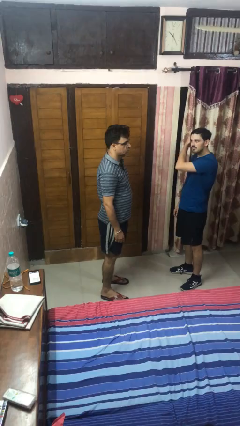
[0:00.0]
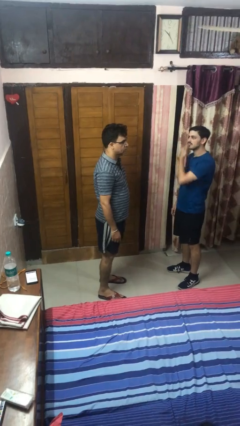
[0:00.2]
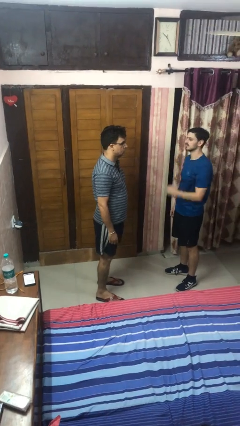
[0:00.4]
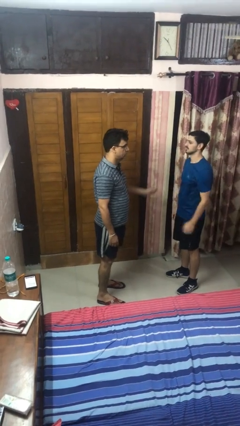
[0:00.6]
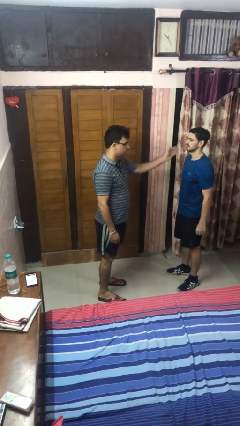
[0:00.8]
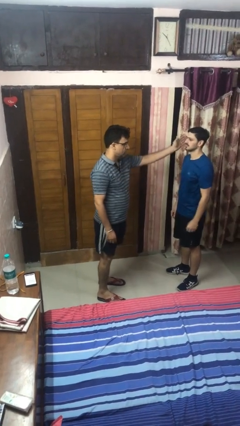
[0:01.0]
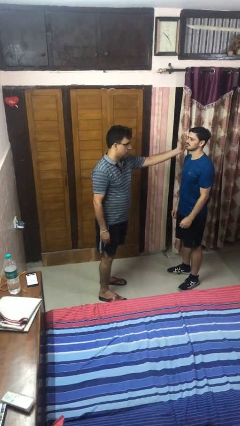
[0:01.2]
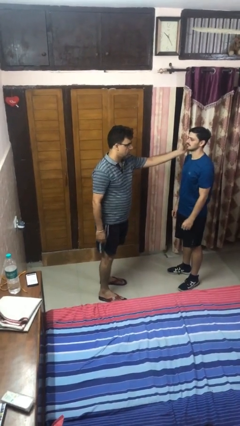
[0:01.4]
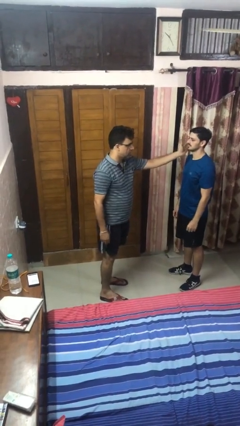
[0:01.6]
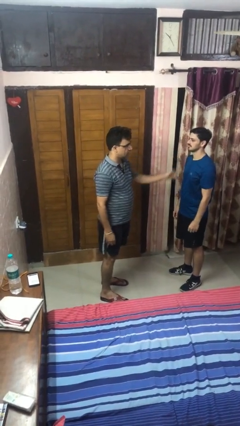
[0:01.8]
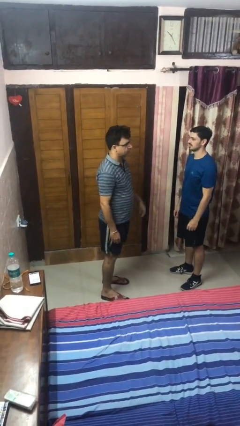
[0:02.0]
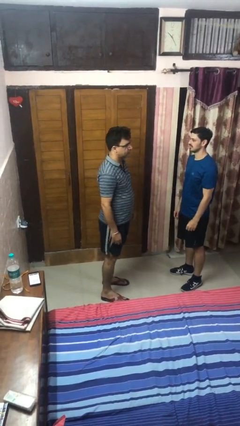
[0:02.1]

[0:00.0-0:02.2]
person touches face of person

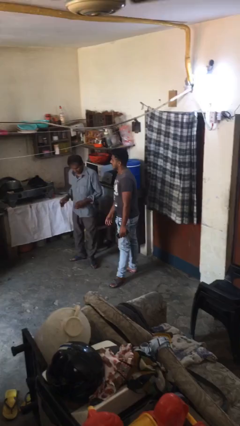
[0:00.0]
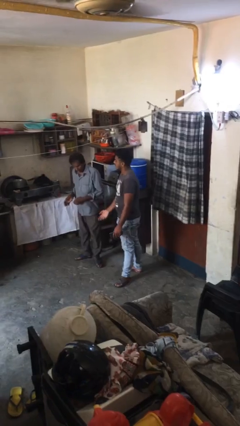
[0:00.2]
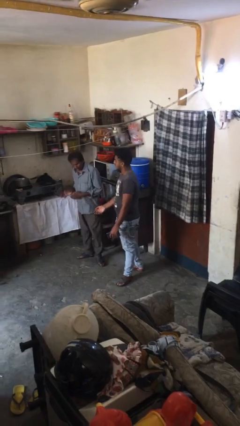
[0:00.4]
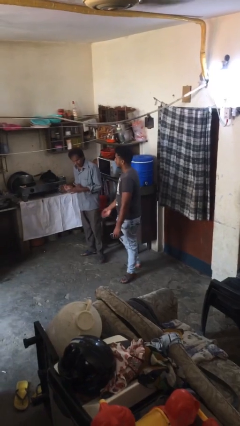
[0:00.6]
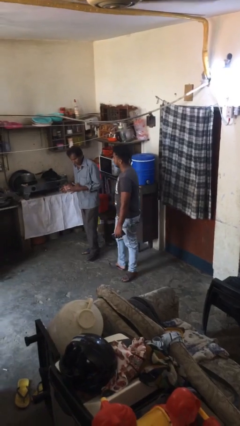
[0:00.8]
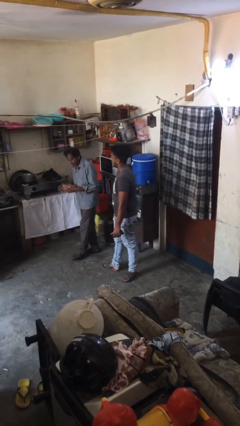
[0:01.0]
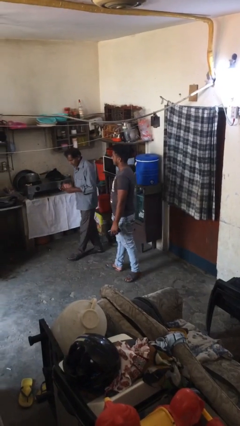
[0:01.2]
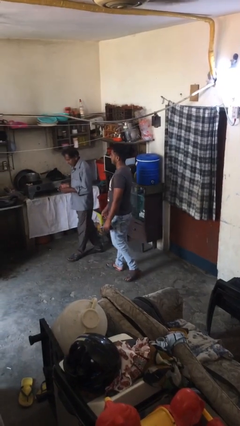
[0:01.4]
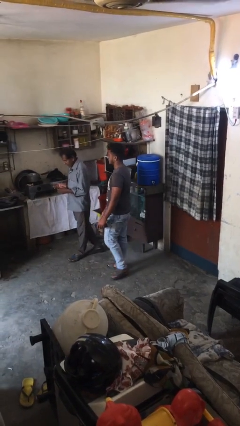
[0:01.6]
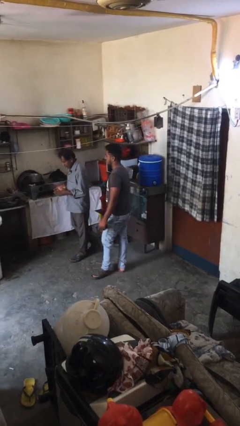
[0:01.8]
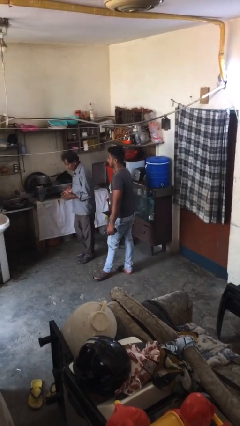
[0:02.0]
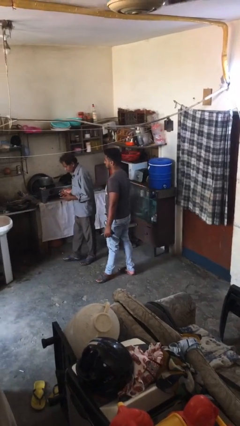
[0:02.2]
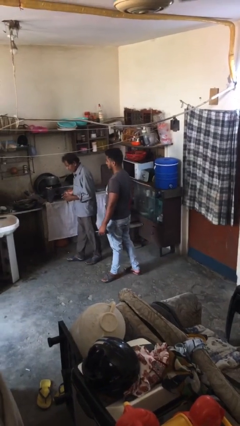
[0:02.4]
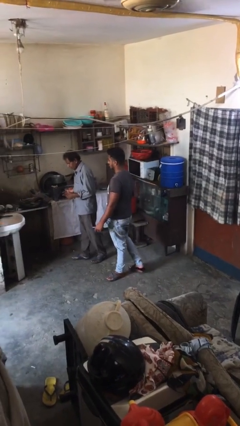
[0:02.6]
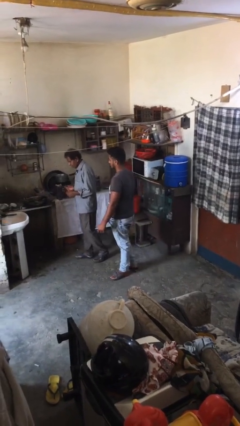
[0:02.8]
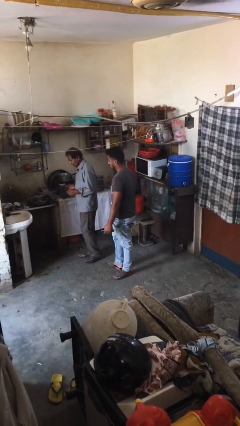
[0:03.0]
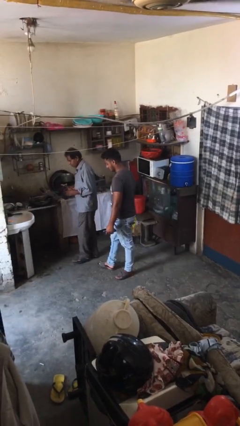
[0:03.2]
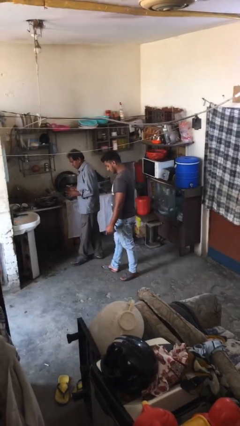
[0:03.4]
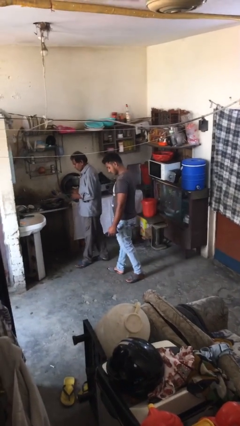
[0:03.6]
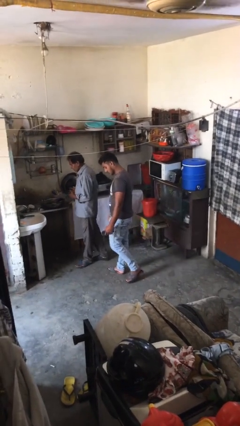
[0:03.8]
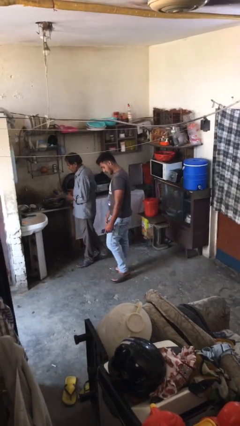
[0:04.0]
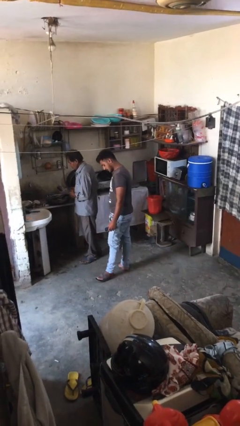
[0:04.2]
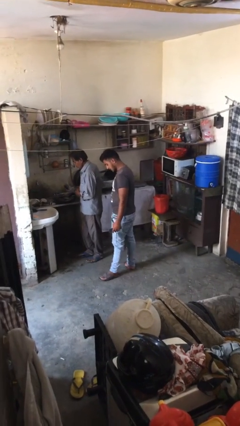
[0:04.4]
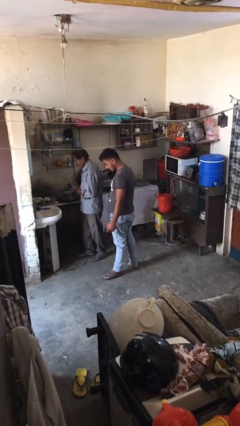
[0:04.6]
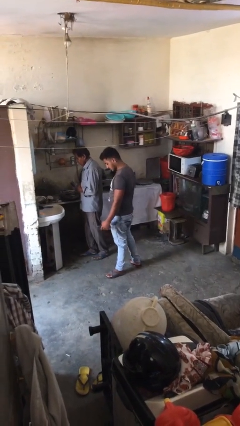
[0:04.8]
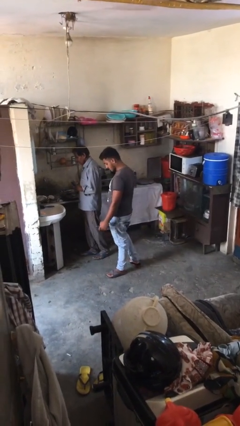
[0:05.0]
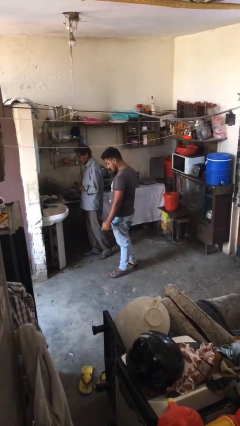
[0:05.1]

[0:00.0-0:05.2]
person talks to person

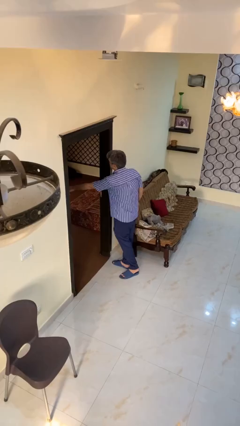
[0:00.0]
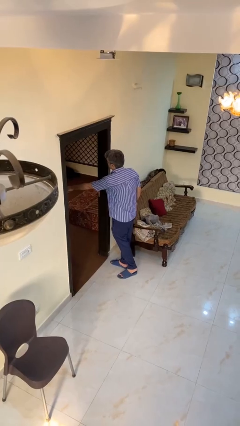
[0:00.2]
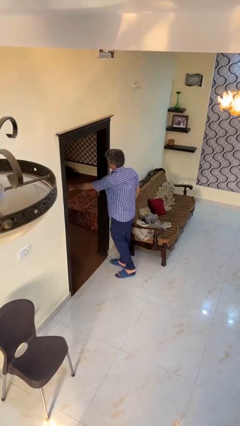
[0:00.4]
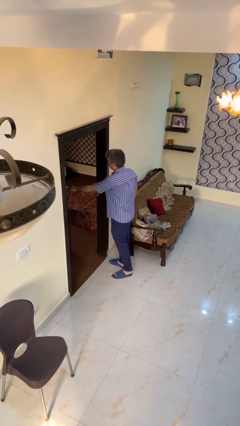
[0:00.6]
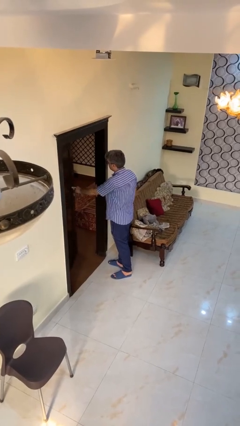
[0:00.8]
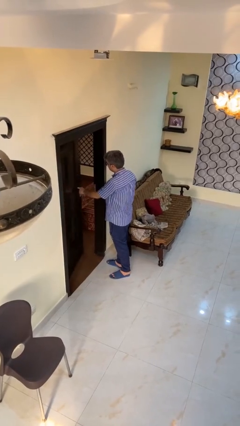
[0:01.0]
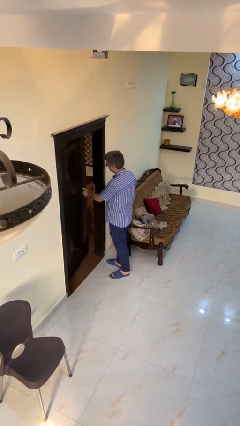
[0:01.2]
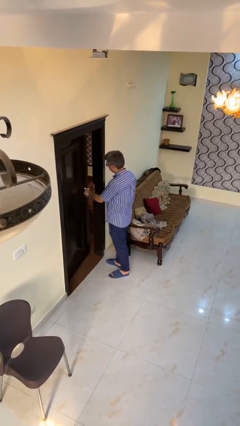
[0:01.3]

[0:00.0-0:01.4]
person closes facility door

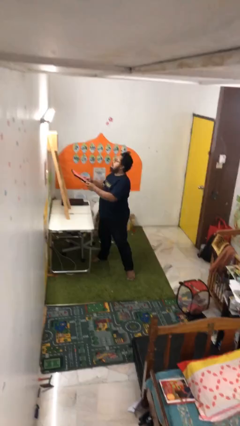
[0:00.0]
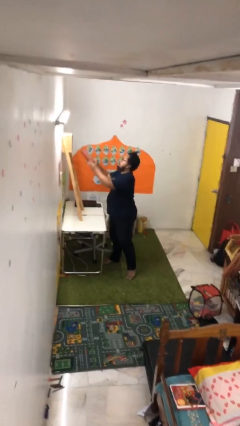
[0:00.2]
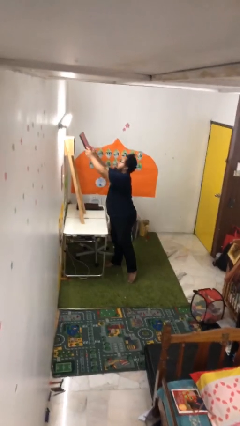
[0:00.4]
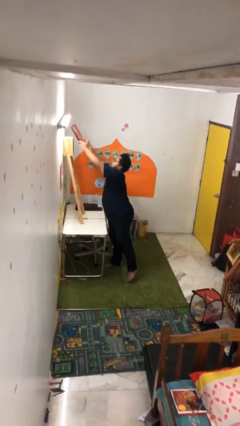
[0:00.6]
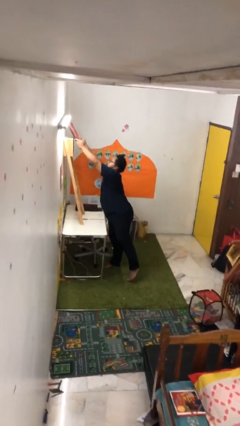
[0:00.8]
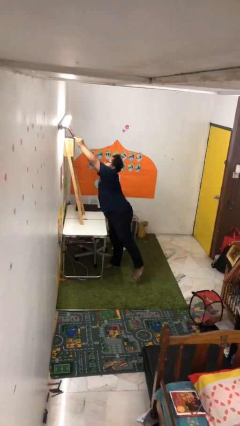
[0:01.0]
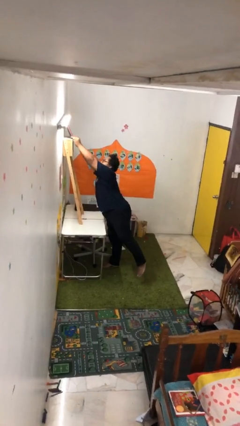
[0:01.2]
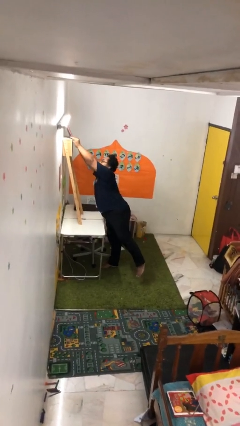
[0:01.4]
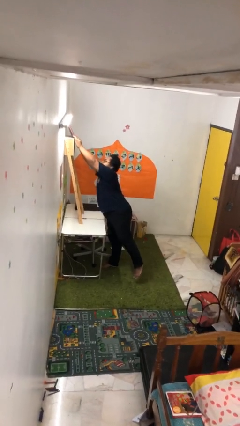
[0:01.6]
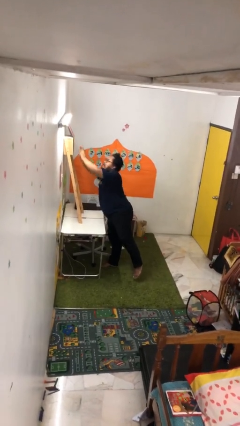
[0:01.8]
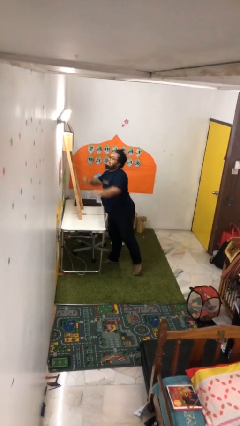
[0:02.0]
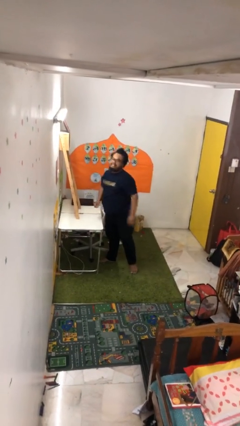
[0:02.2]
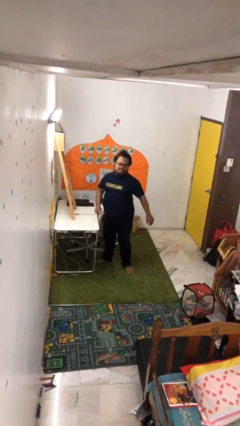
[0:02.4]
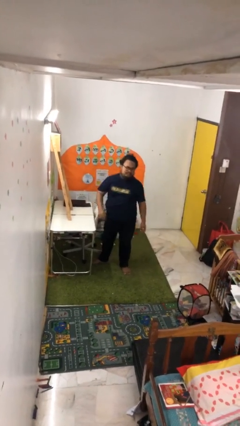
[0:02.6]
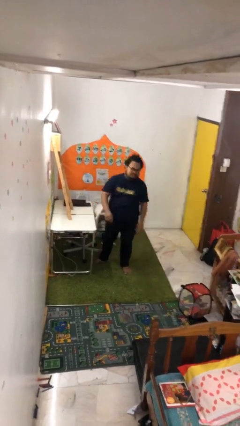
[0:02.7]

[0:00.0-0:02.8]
person puts down object on shelf

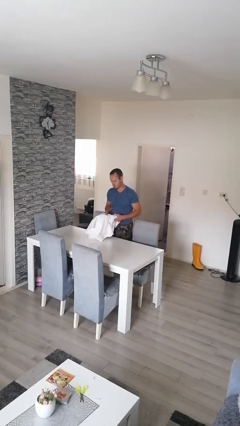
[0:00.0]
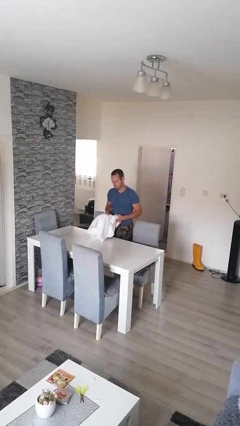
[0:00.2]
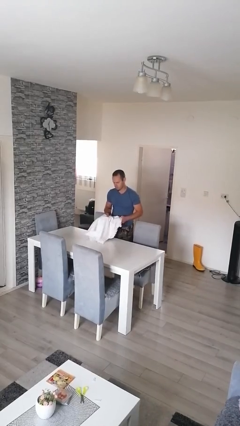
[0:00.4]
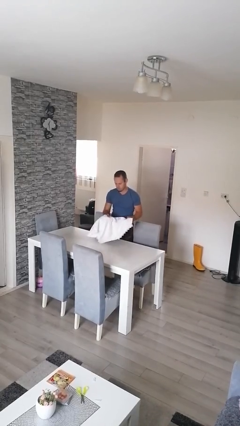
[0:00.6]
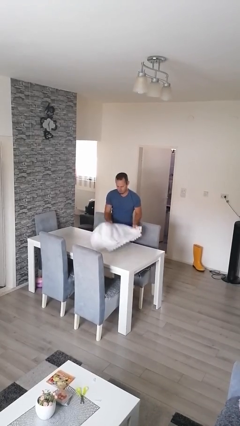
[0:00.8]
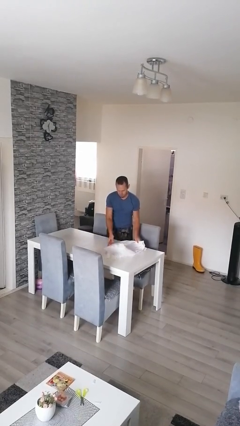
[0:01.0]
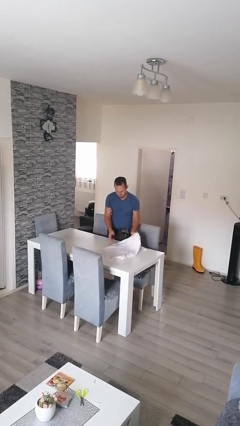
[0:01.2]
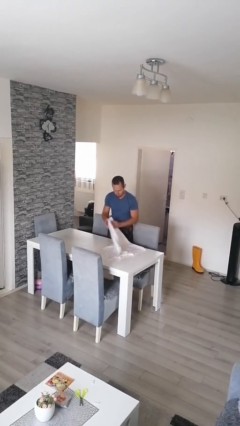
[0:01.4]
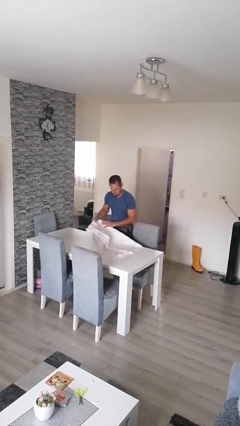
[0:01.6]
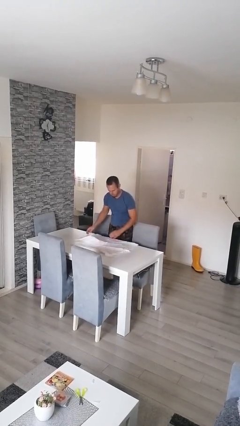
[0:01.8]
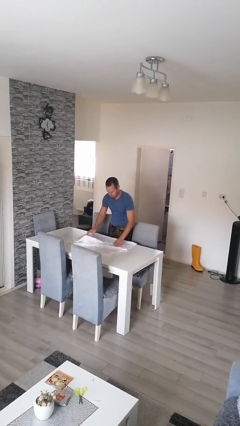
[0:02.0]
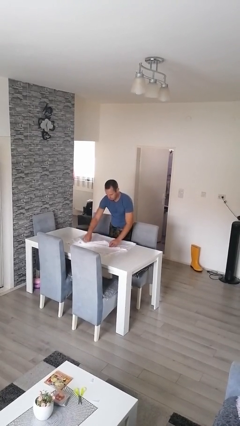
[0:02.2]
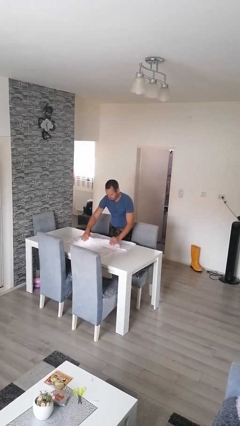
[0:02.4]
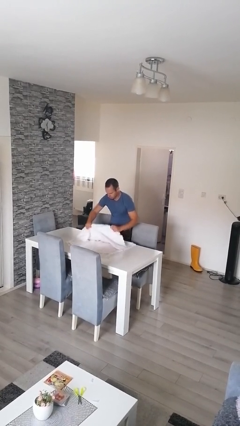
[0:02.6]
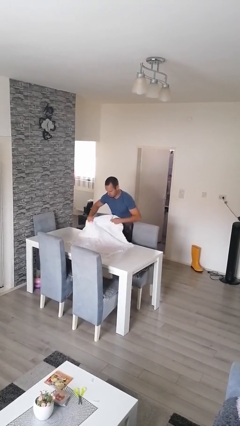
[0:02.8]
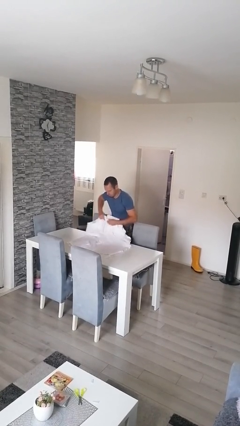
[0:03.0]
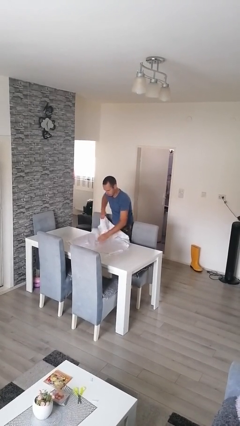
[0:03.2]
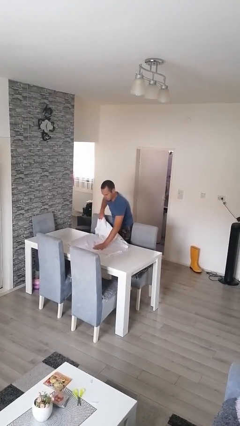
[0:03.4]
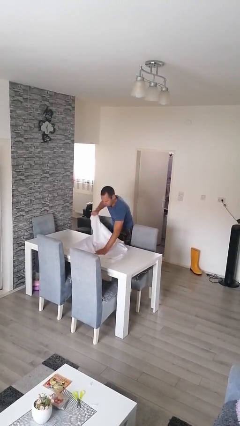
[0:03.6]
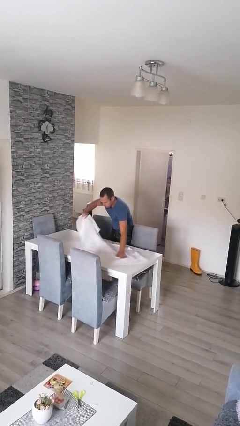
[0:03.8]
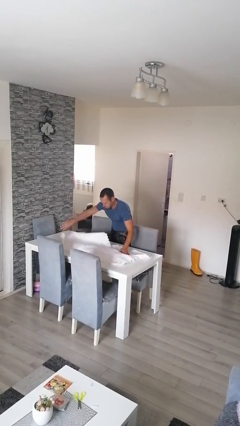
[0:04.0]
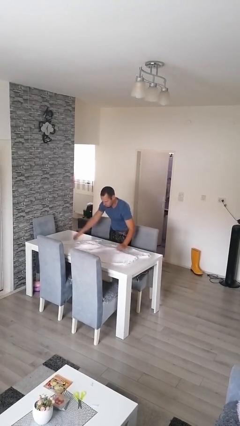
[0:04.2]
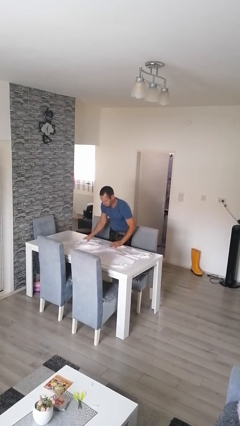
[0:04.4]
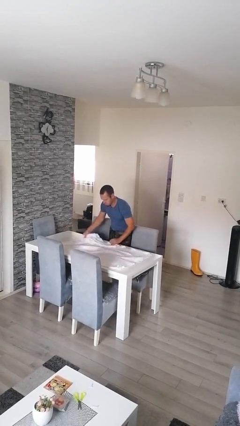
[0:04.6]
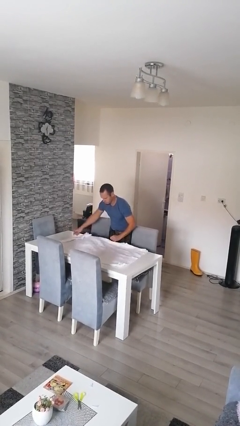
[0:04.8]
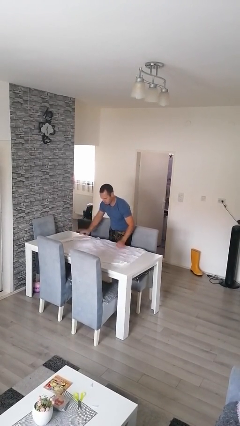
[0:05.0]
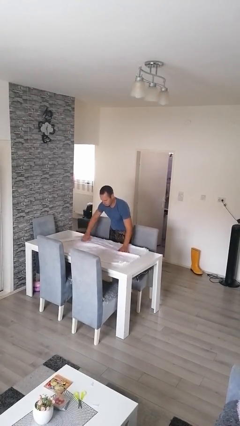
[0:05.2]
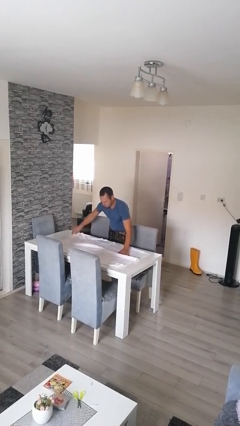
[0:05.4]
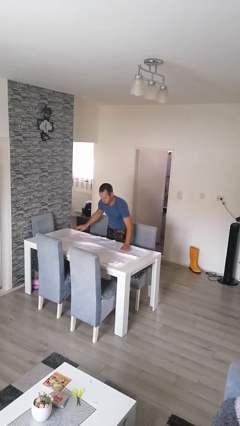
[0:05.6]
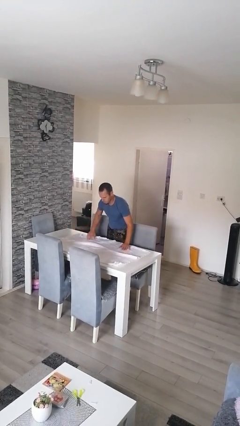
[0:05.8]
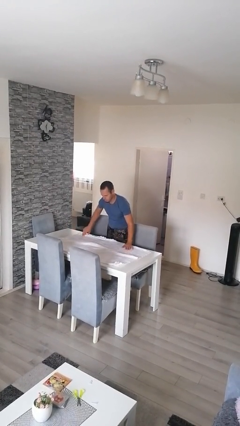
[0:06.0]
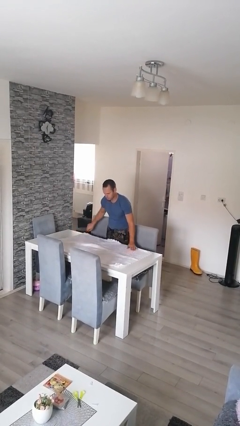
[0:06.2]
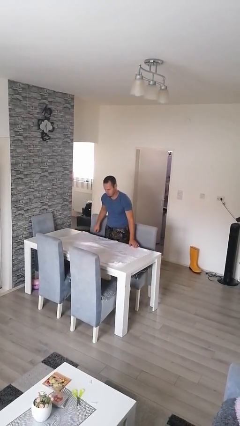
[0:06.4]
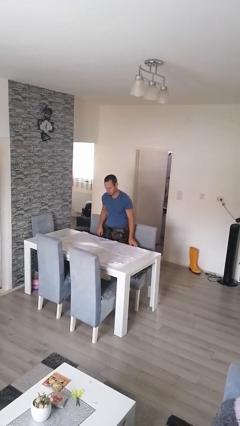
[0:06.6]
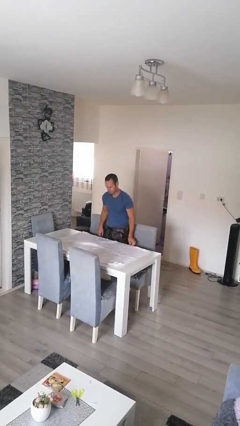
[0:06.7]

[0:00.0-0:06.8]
person spreads tablecloth
